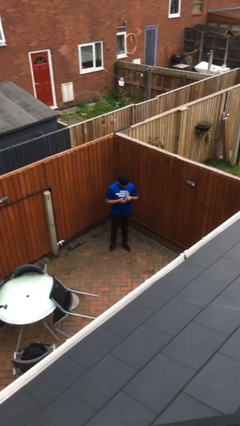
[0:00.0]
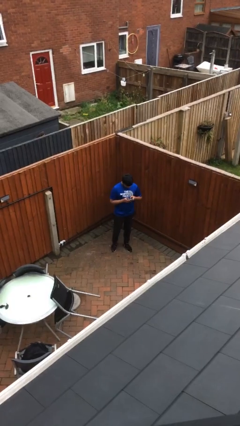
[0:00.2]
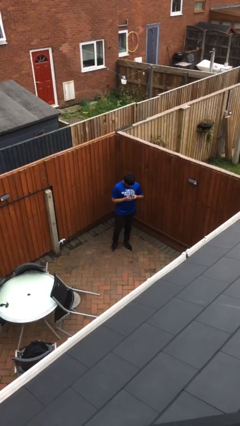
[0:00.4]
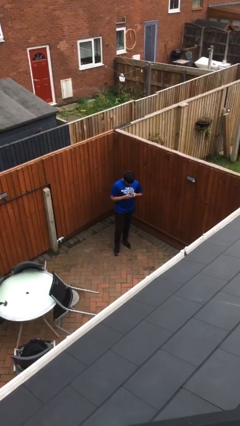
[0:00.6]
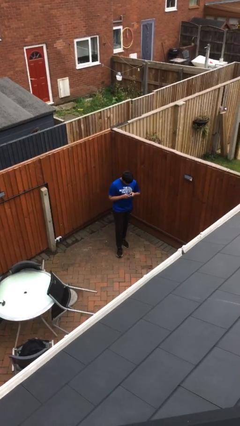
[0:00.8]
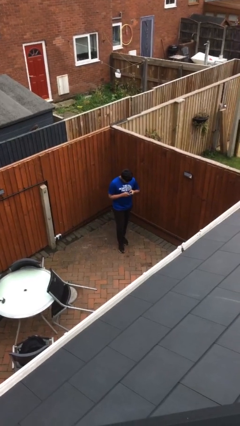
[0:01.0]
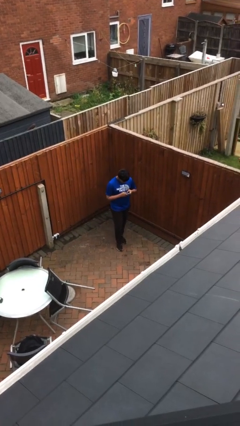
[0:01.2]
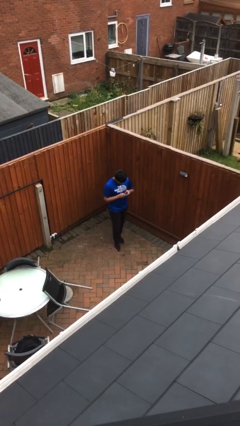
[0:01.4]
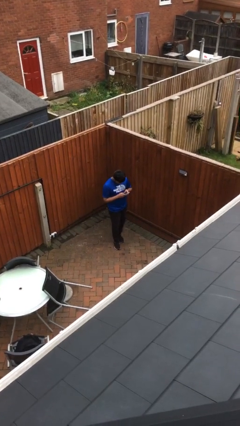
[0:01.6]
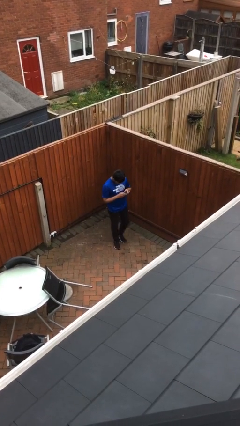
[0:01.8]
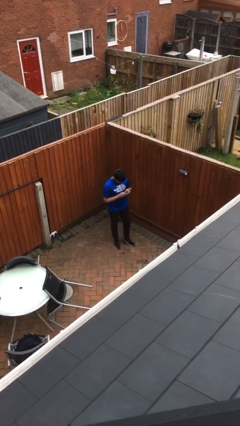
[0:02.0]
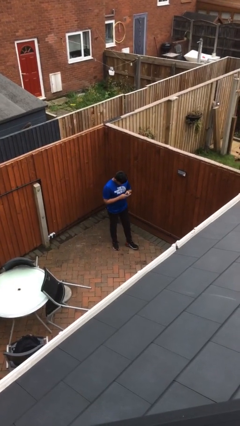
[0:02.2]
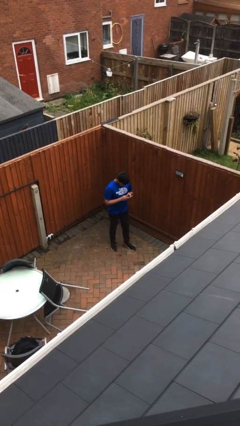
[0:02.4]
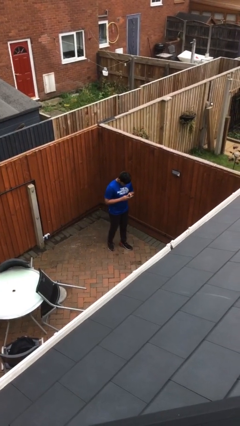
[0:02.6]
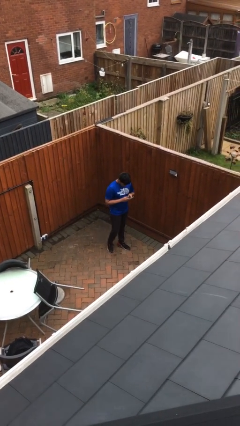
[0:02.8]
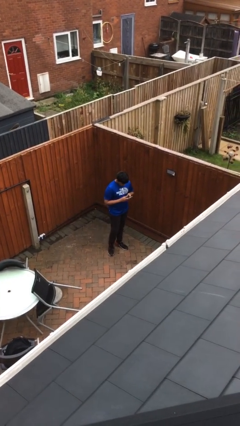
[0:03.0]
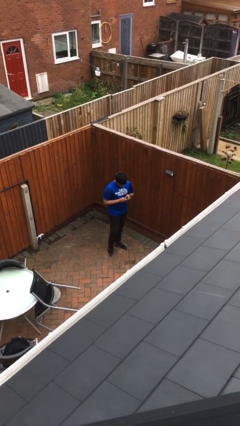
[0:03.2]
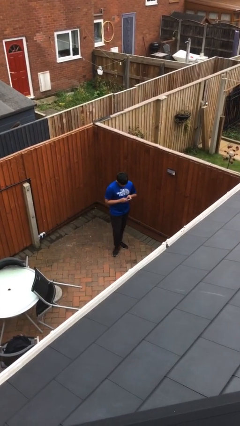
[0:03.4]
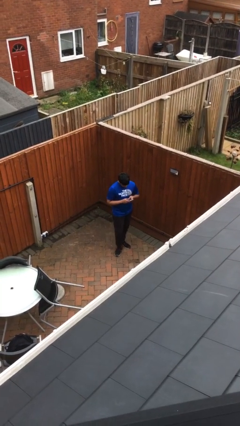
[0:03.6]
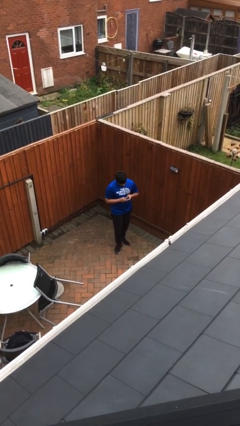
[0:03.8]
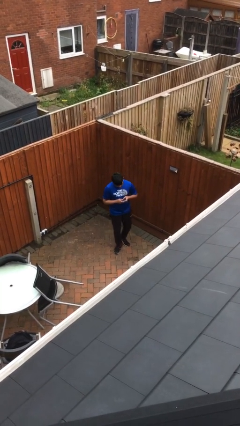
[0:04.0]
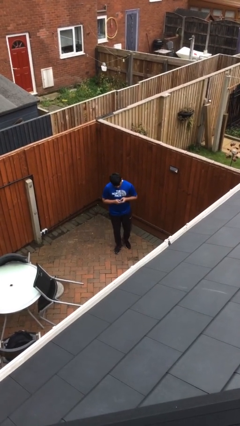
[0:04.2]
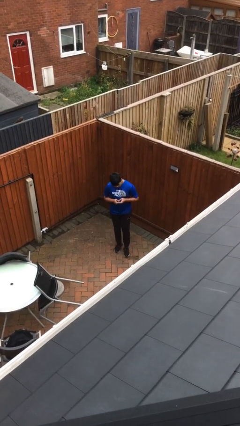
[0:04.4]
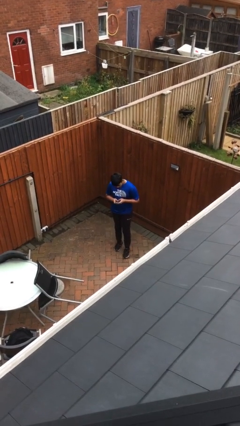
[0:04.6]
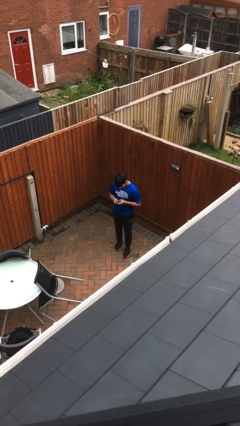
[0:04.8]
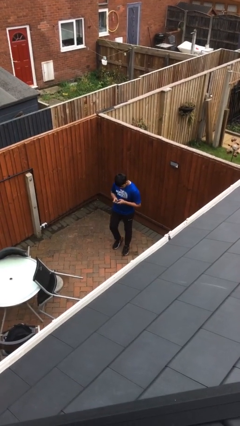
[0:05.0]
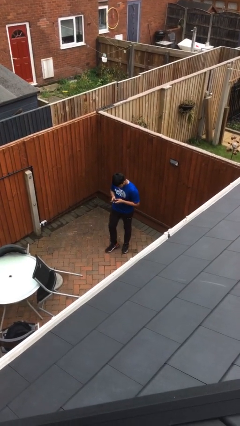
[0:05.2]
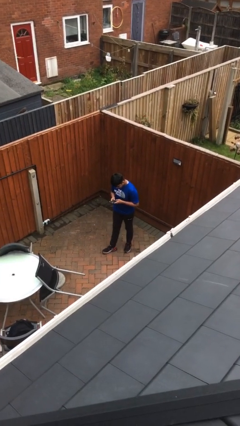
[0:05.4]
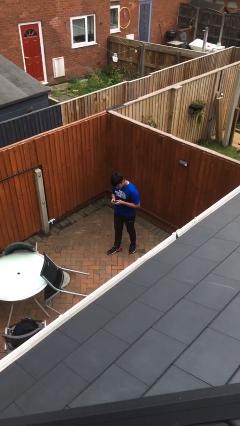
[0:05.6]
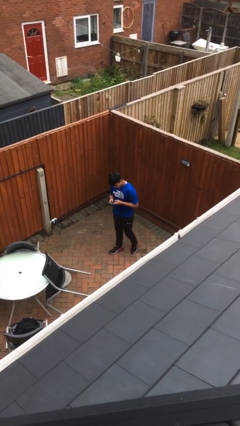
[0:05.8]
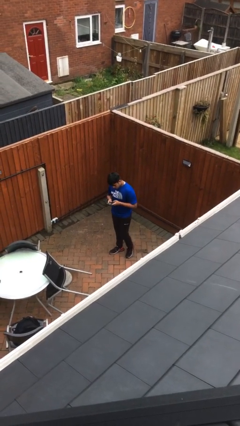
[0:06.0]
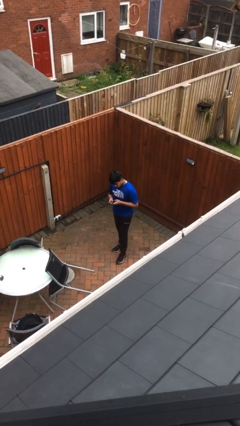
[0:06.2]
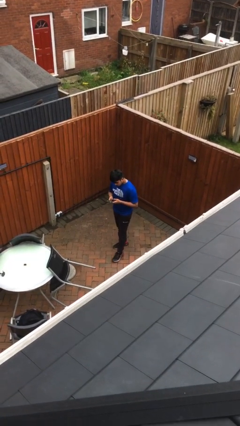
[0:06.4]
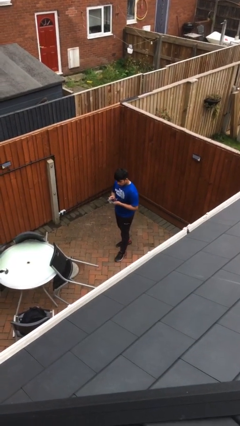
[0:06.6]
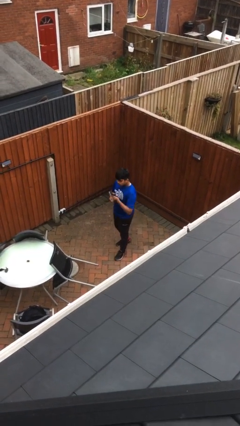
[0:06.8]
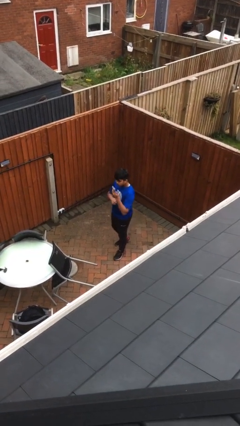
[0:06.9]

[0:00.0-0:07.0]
person texts on phone

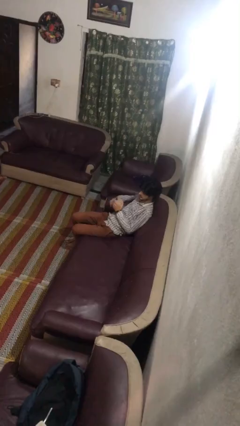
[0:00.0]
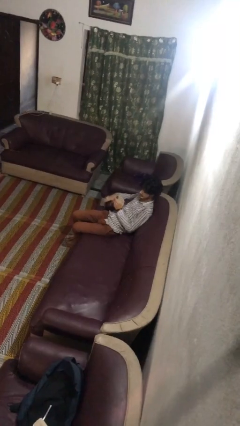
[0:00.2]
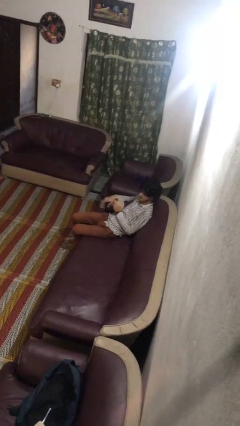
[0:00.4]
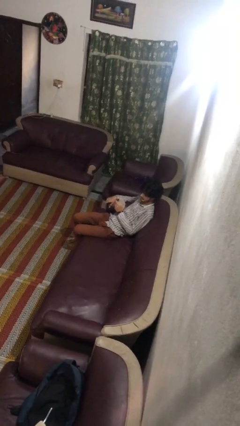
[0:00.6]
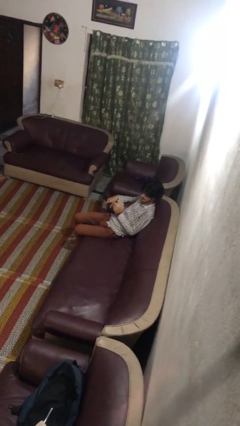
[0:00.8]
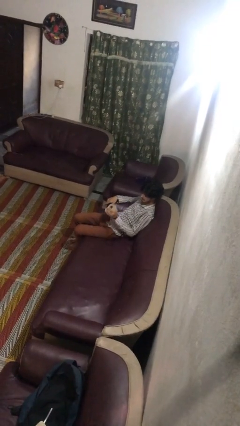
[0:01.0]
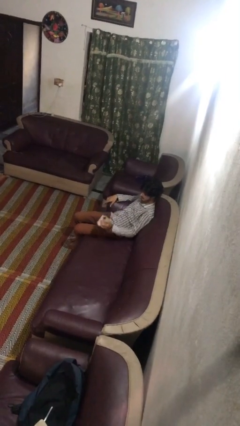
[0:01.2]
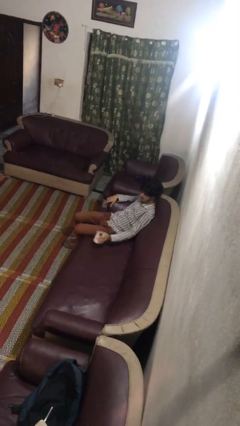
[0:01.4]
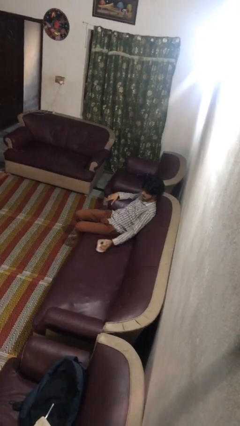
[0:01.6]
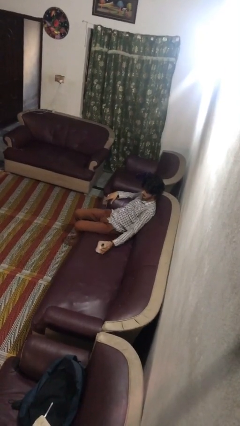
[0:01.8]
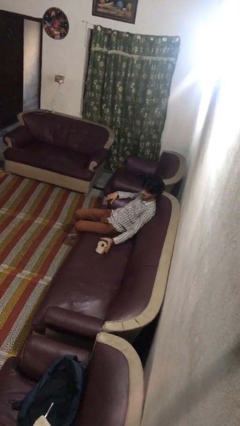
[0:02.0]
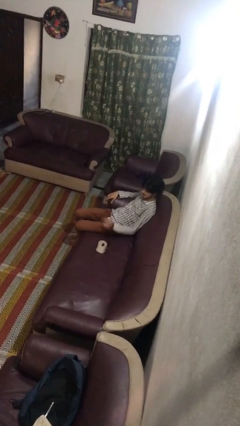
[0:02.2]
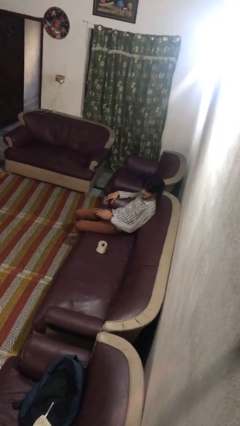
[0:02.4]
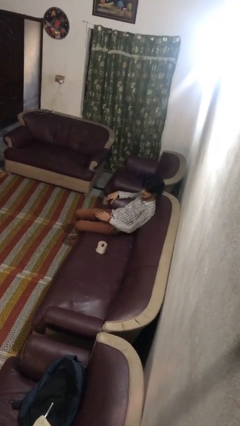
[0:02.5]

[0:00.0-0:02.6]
person puts down object on couch

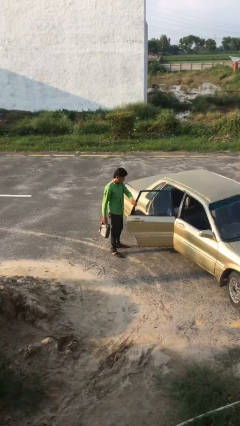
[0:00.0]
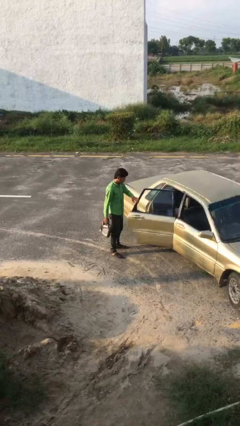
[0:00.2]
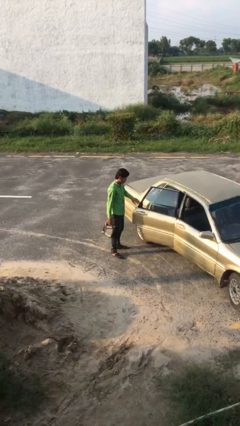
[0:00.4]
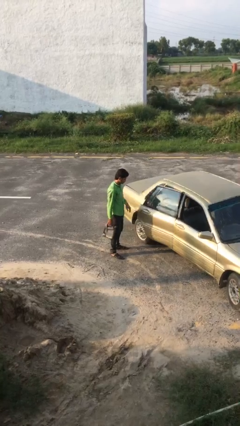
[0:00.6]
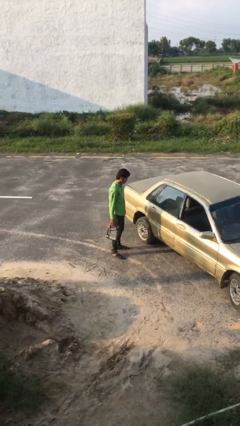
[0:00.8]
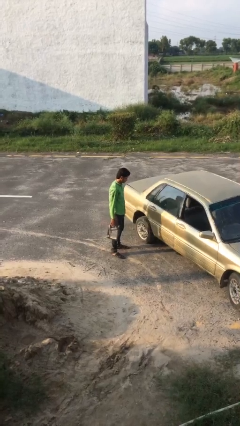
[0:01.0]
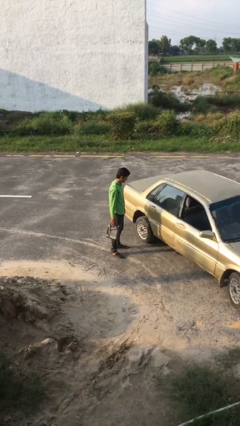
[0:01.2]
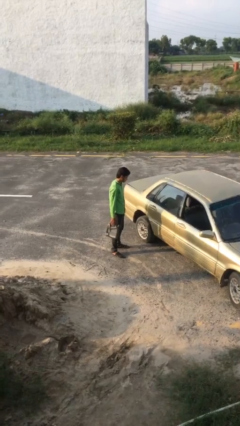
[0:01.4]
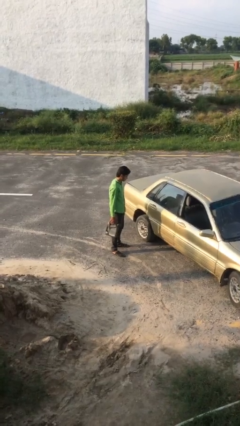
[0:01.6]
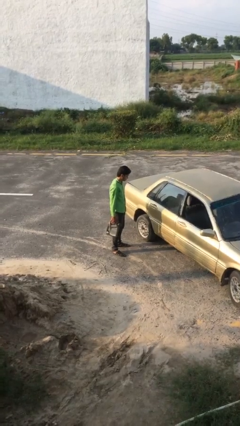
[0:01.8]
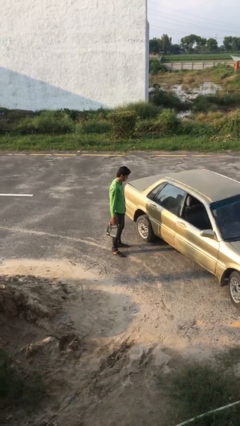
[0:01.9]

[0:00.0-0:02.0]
person closes car door

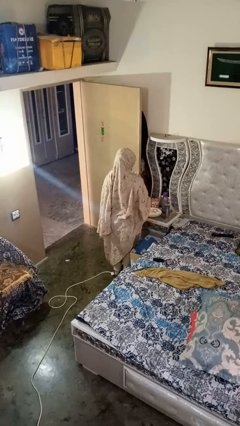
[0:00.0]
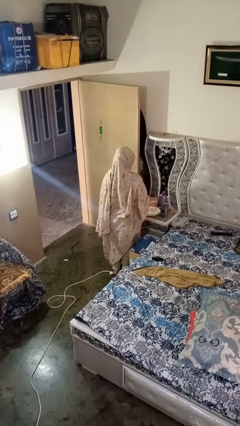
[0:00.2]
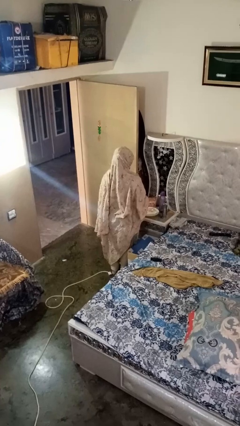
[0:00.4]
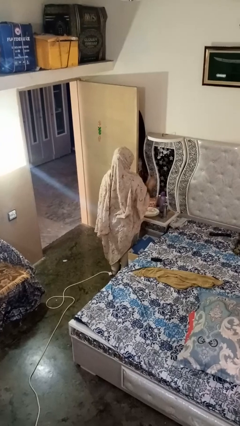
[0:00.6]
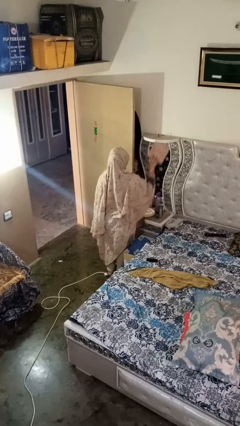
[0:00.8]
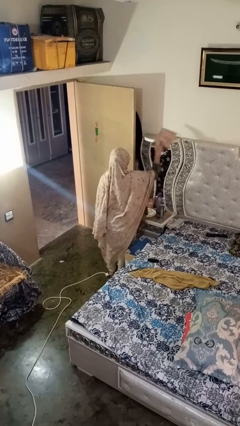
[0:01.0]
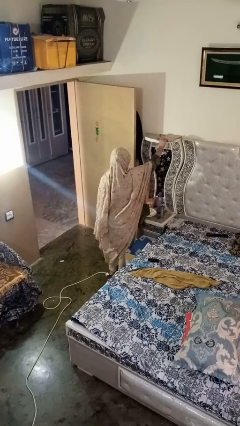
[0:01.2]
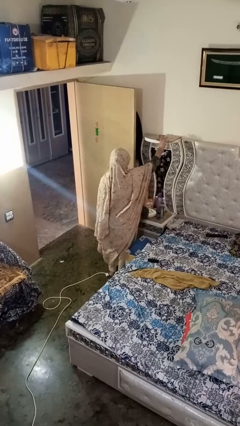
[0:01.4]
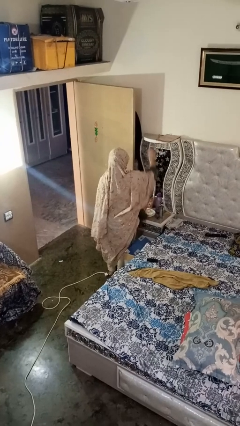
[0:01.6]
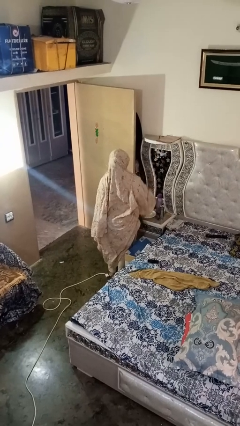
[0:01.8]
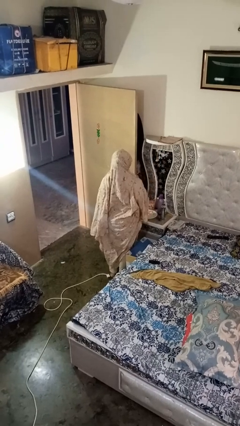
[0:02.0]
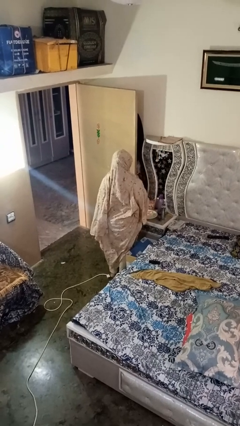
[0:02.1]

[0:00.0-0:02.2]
person puts down object on shelf

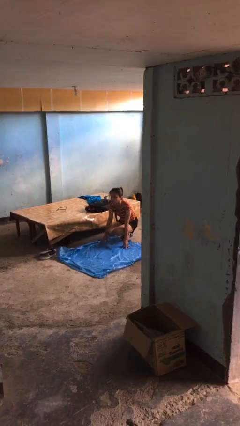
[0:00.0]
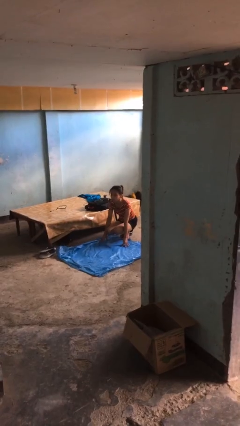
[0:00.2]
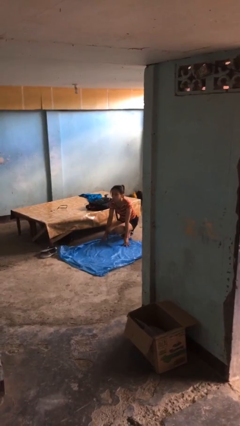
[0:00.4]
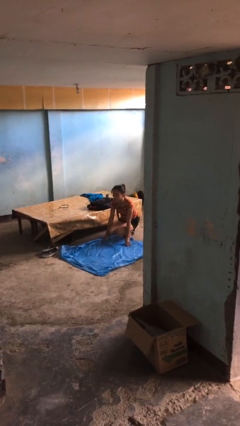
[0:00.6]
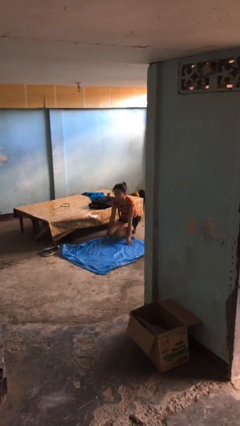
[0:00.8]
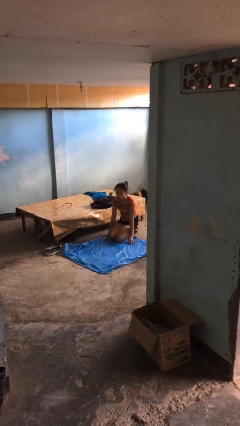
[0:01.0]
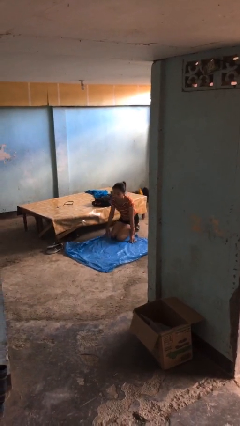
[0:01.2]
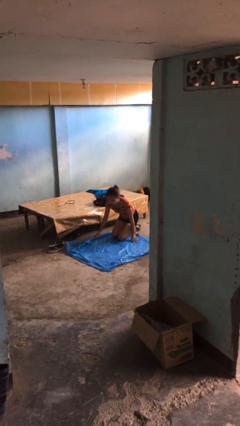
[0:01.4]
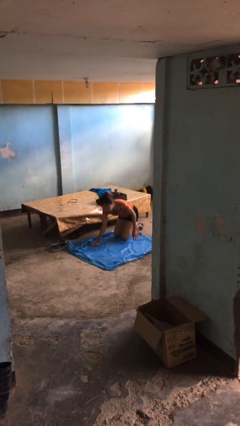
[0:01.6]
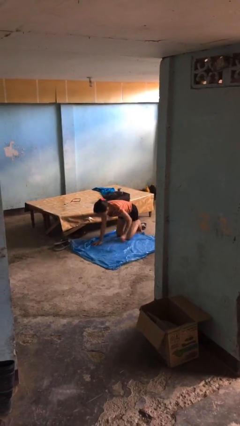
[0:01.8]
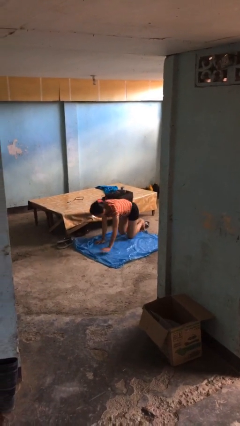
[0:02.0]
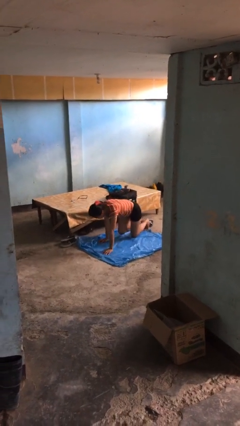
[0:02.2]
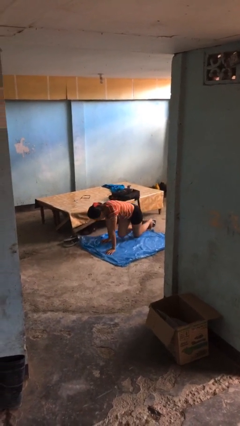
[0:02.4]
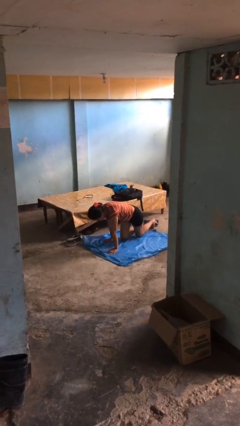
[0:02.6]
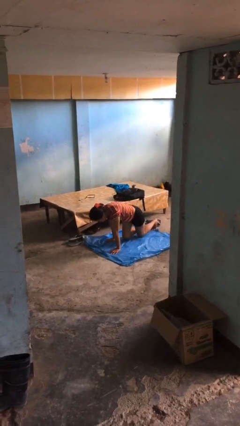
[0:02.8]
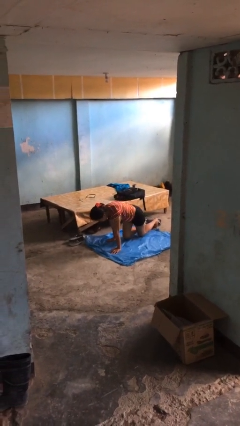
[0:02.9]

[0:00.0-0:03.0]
person crawls

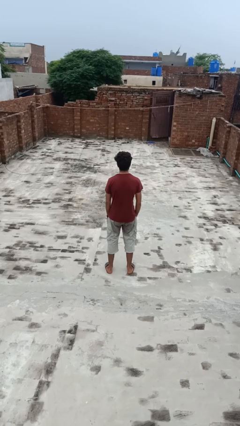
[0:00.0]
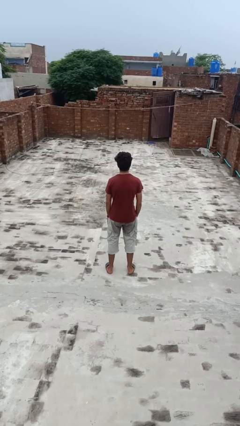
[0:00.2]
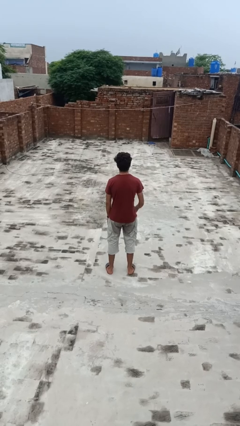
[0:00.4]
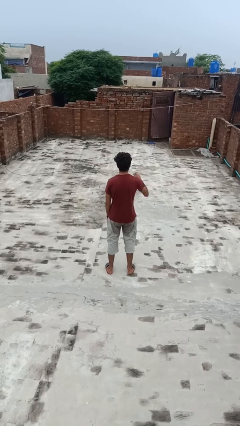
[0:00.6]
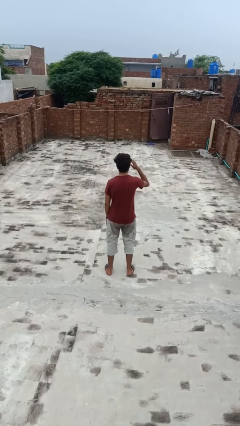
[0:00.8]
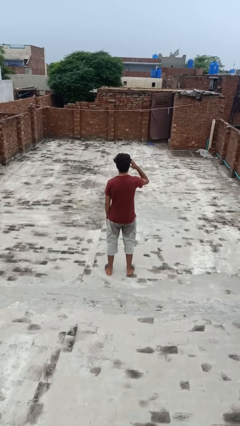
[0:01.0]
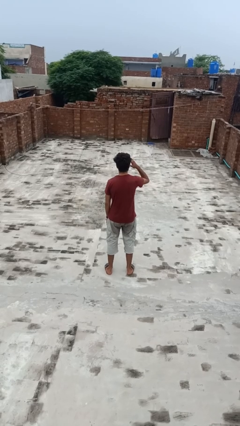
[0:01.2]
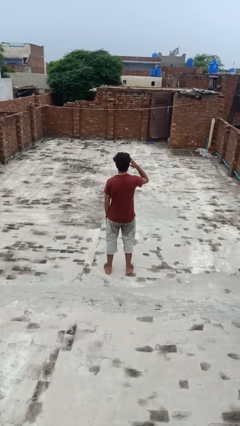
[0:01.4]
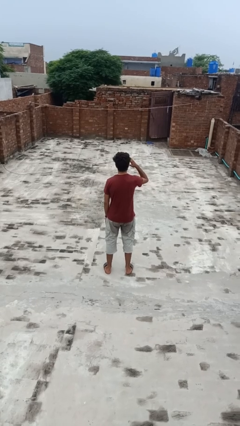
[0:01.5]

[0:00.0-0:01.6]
person salutes
